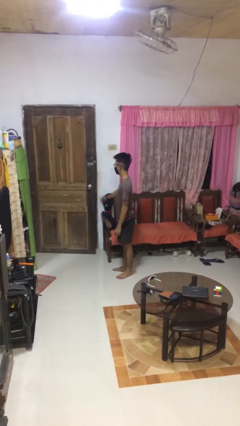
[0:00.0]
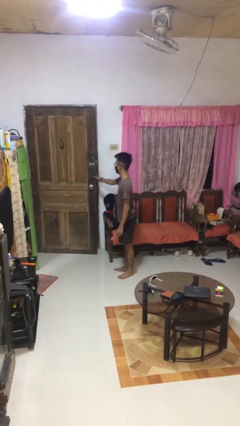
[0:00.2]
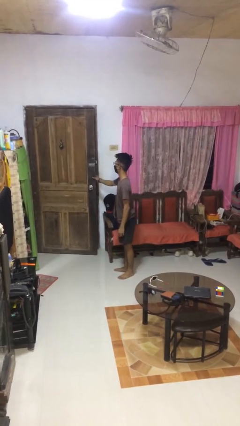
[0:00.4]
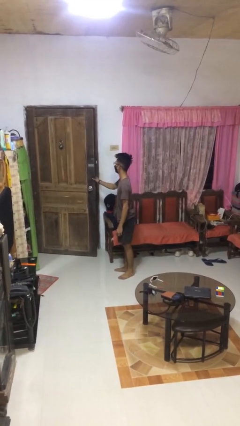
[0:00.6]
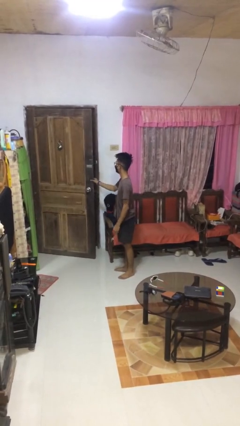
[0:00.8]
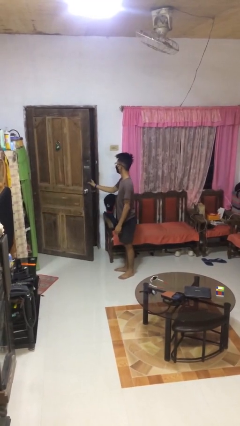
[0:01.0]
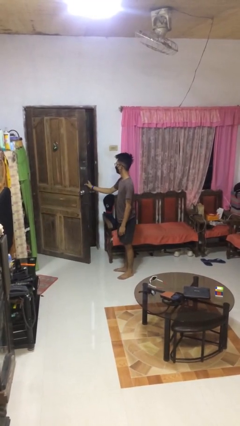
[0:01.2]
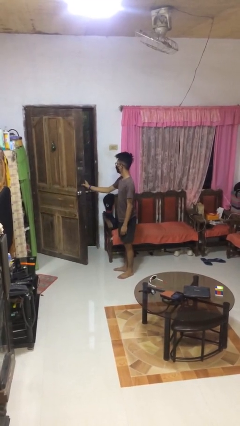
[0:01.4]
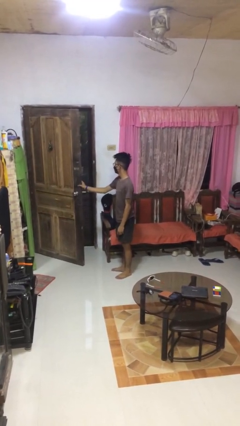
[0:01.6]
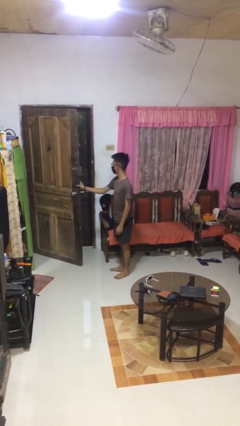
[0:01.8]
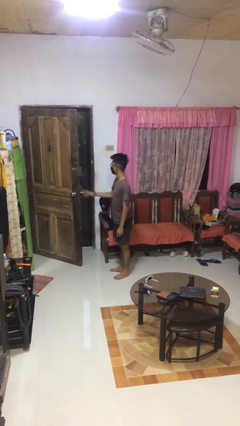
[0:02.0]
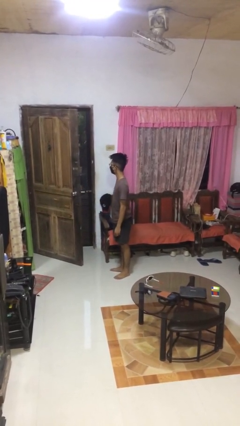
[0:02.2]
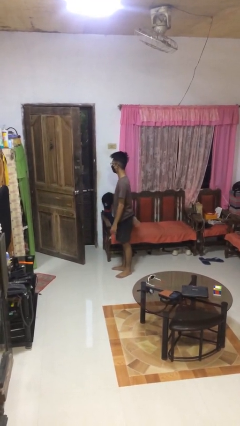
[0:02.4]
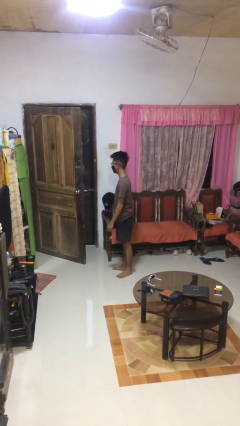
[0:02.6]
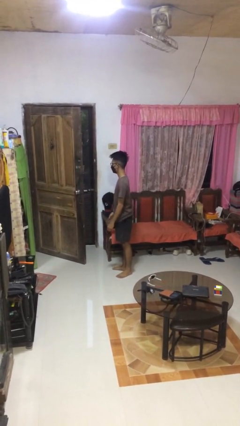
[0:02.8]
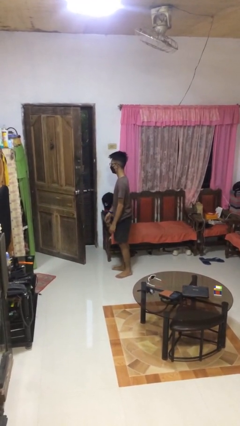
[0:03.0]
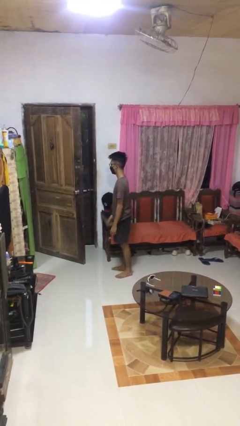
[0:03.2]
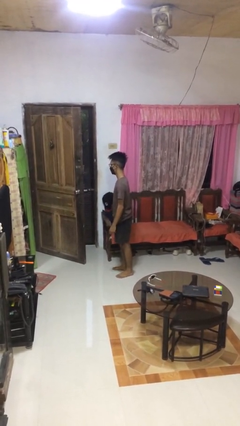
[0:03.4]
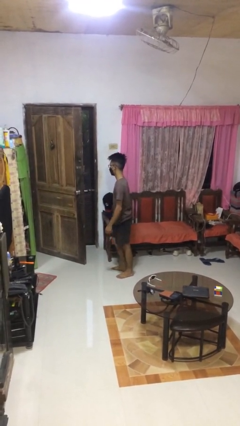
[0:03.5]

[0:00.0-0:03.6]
person opens facility door

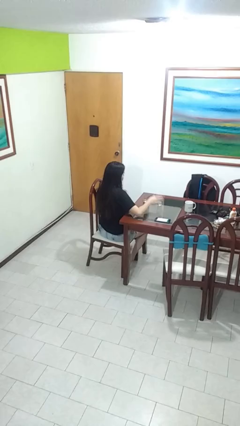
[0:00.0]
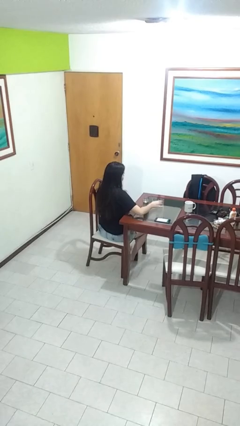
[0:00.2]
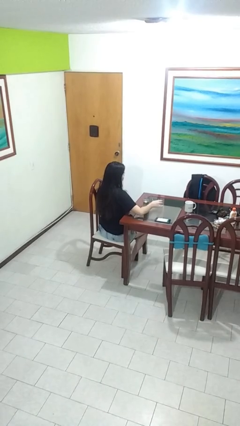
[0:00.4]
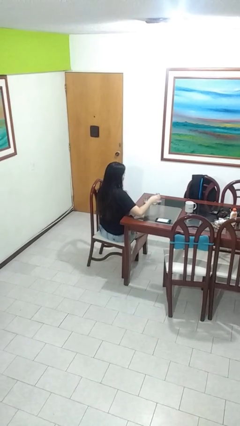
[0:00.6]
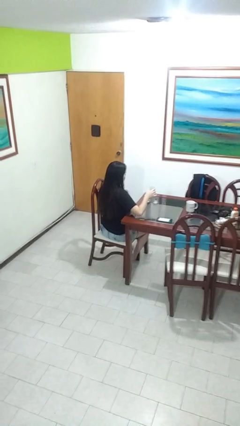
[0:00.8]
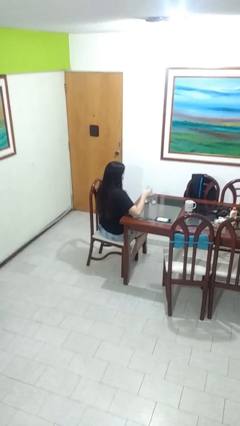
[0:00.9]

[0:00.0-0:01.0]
person picks up object from table

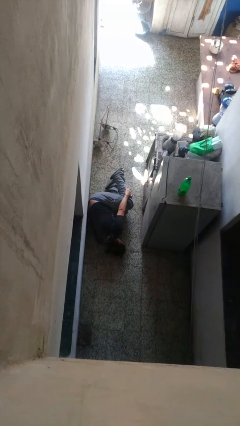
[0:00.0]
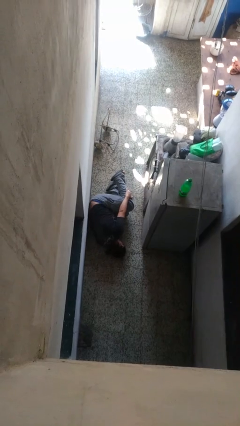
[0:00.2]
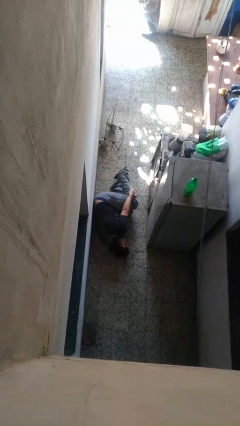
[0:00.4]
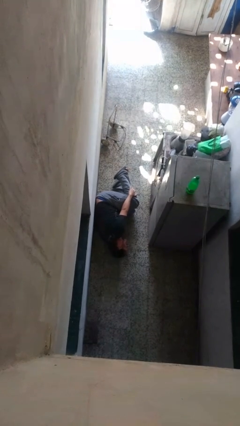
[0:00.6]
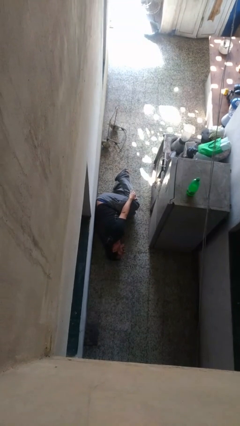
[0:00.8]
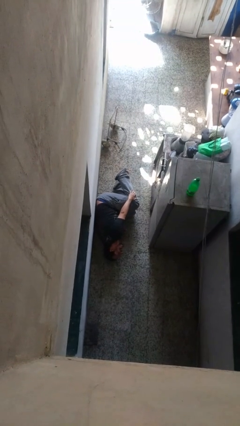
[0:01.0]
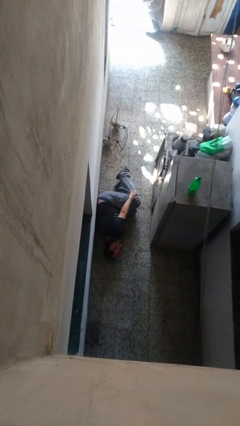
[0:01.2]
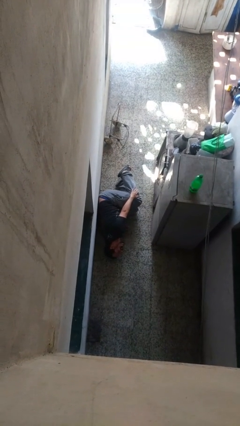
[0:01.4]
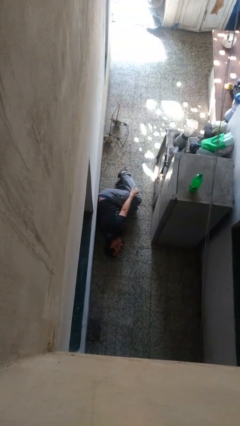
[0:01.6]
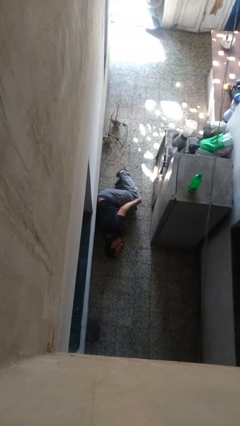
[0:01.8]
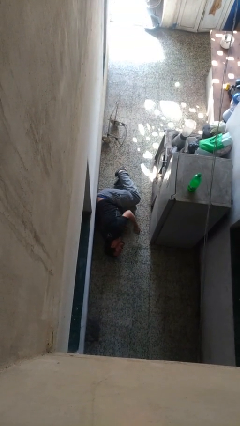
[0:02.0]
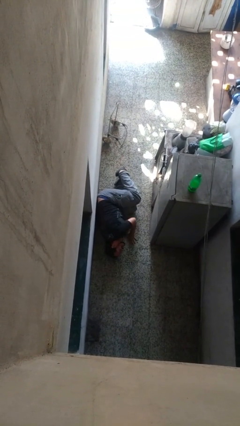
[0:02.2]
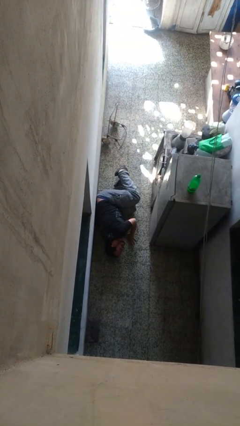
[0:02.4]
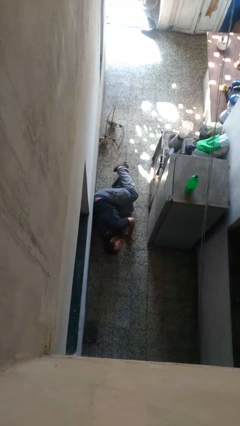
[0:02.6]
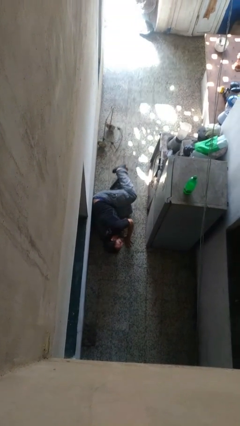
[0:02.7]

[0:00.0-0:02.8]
person lies down on floor

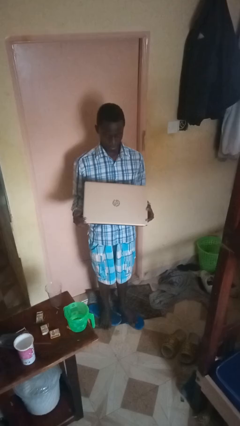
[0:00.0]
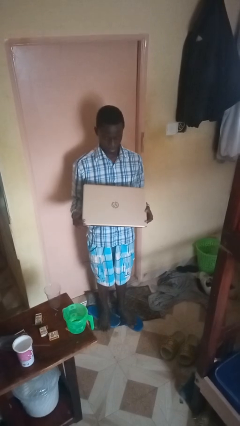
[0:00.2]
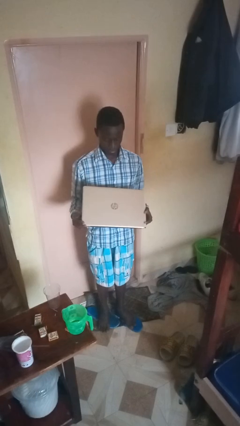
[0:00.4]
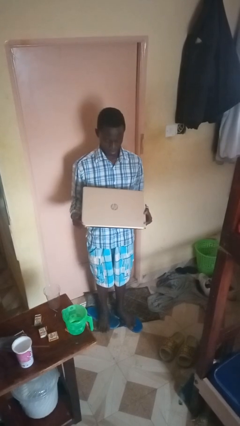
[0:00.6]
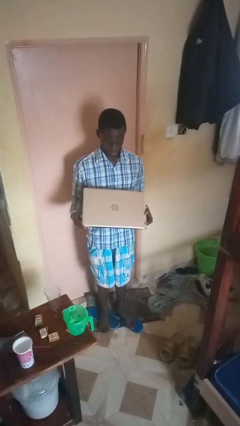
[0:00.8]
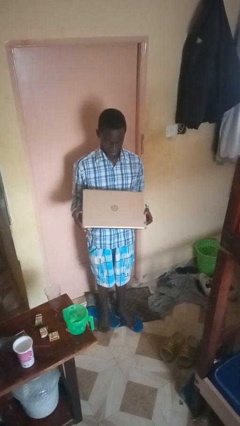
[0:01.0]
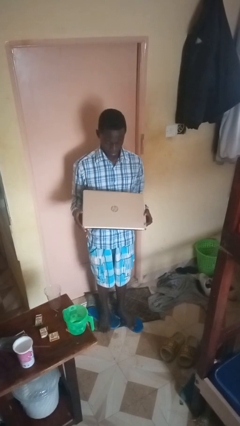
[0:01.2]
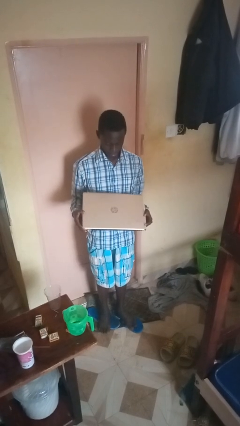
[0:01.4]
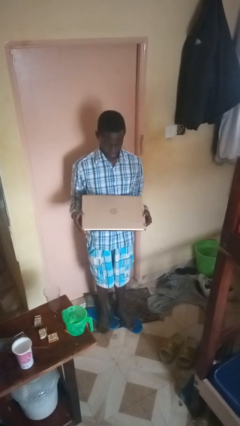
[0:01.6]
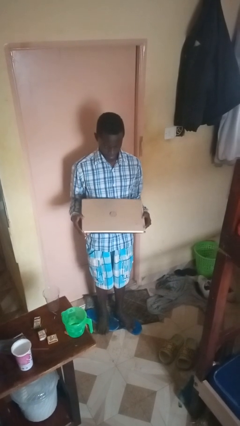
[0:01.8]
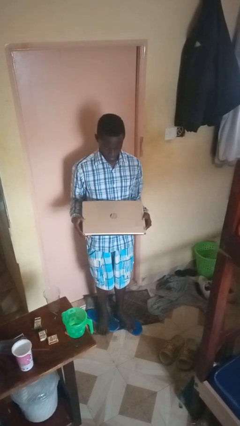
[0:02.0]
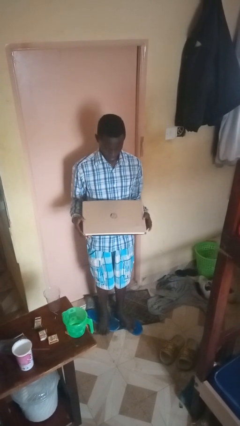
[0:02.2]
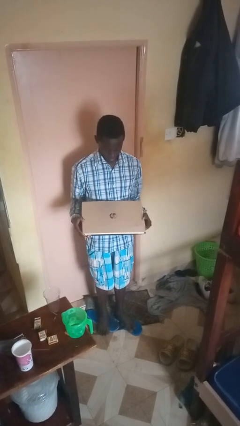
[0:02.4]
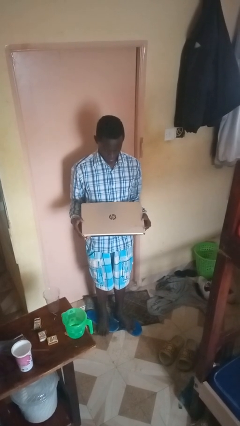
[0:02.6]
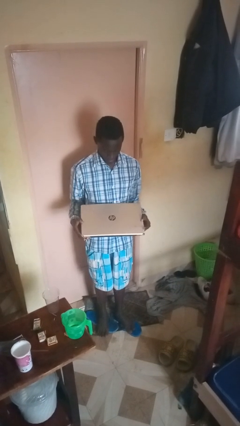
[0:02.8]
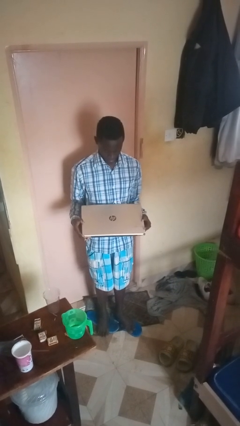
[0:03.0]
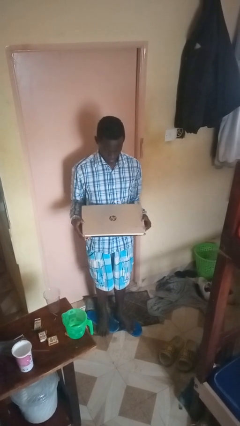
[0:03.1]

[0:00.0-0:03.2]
person closes laptop

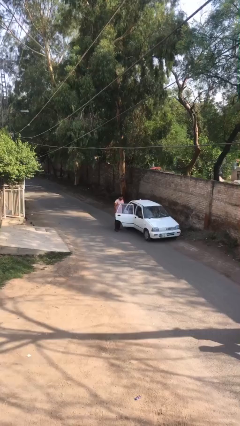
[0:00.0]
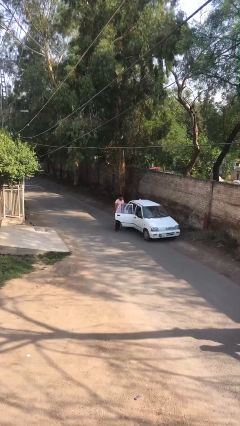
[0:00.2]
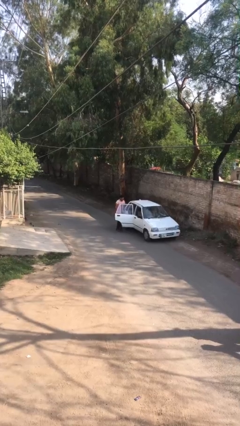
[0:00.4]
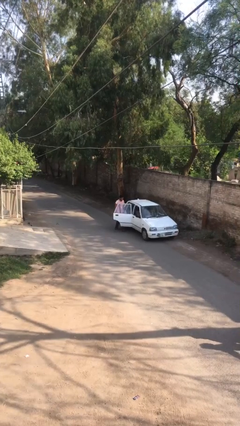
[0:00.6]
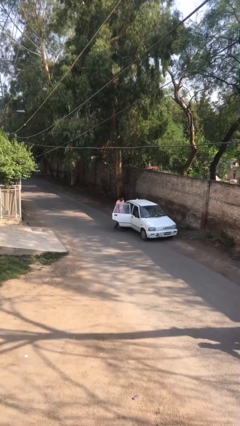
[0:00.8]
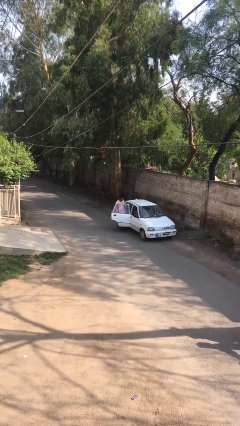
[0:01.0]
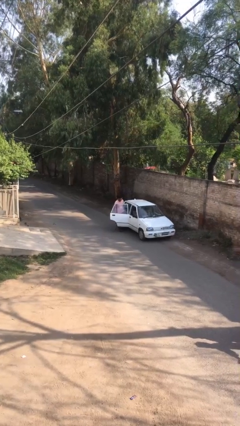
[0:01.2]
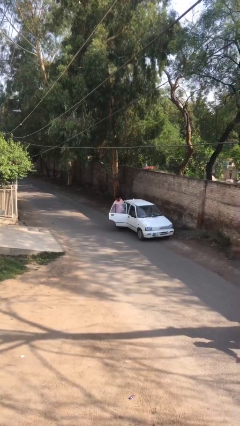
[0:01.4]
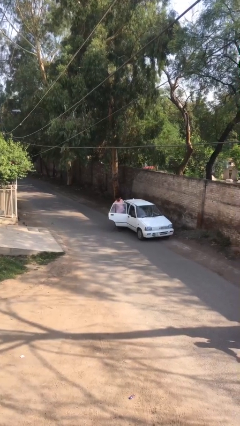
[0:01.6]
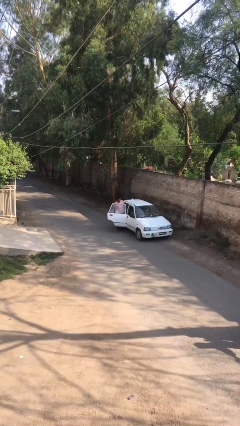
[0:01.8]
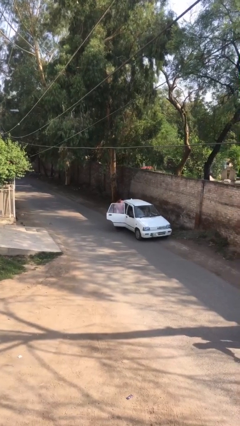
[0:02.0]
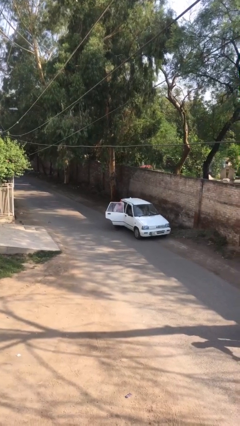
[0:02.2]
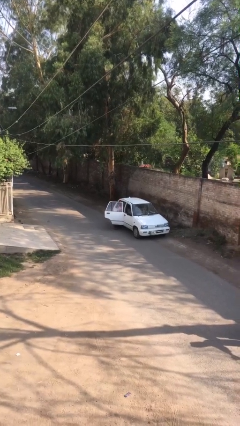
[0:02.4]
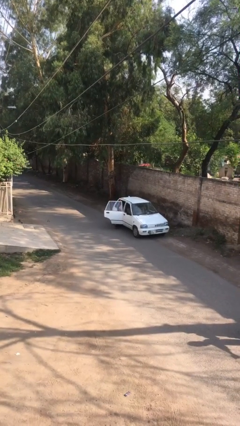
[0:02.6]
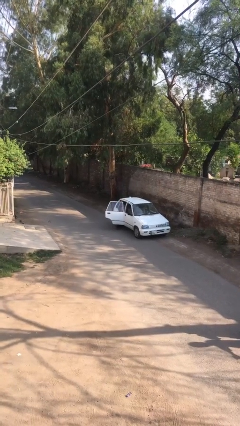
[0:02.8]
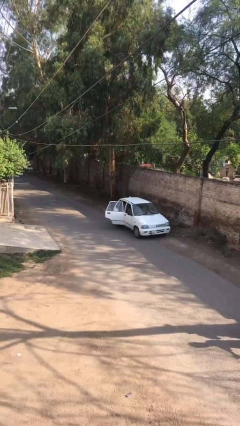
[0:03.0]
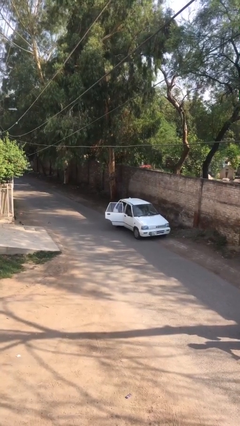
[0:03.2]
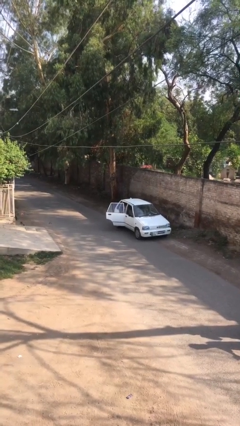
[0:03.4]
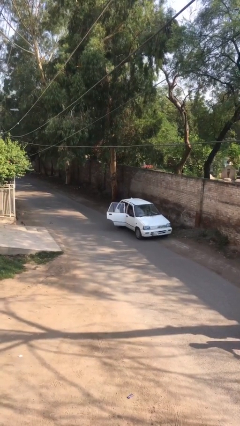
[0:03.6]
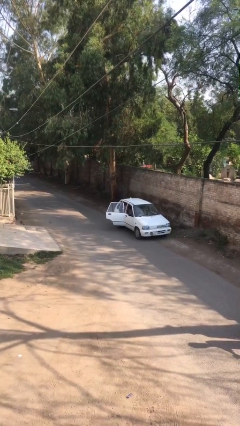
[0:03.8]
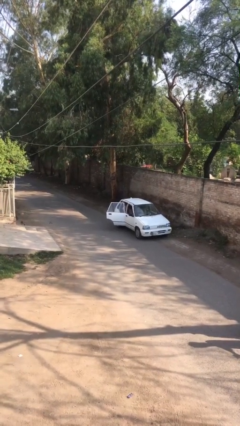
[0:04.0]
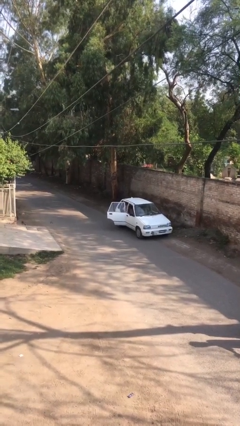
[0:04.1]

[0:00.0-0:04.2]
person enters car

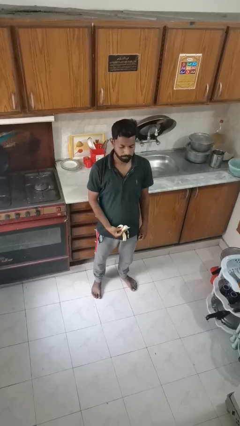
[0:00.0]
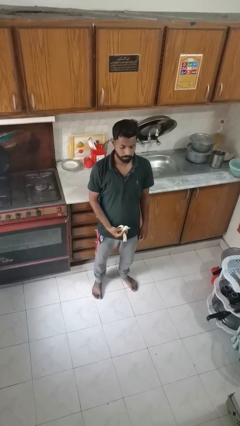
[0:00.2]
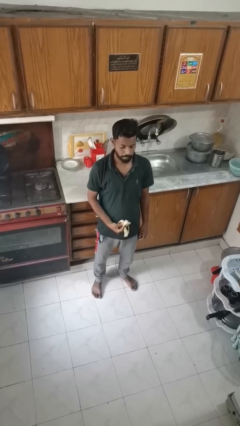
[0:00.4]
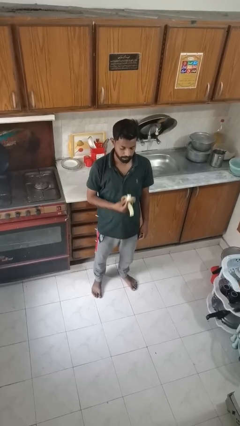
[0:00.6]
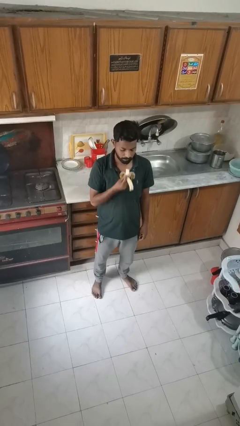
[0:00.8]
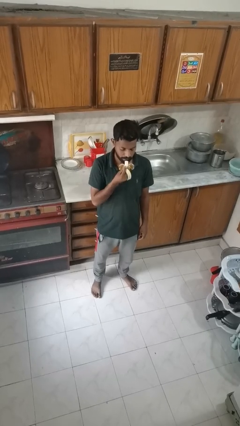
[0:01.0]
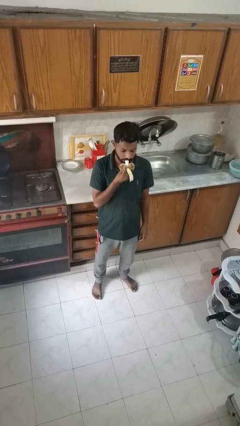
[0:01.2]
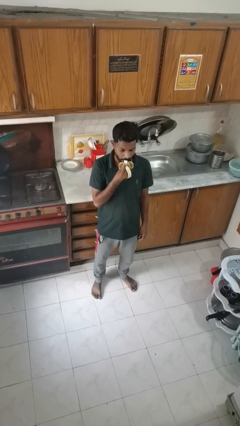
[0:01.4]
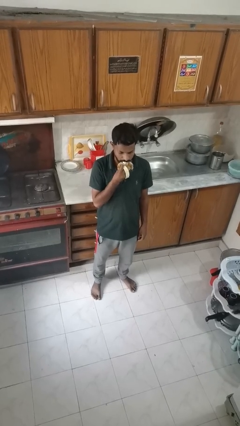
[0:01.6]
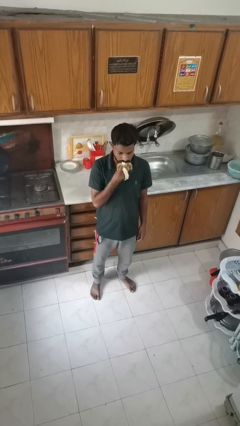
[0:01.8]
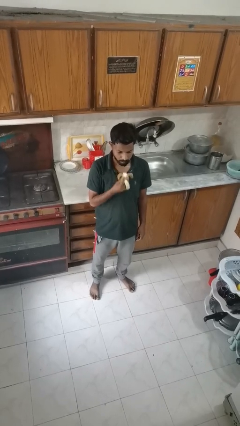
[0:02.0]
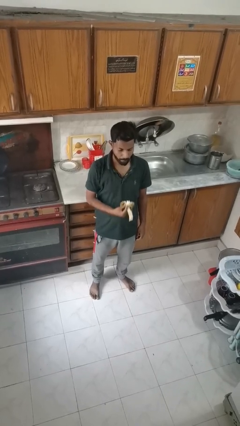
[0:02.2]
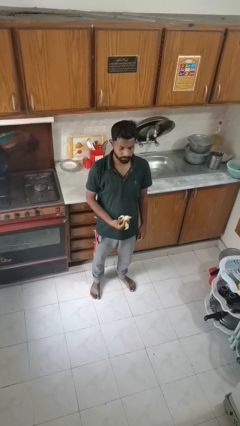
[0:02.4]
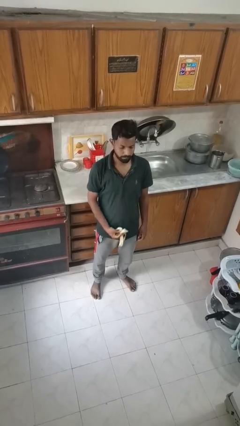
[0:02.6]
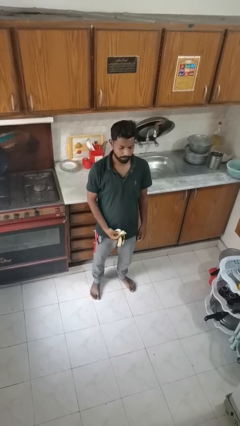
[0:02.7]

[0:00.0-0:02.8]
person eats banana
